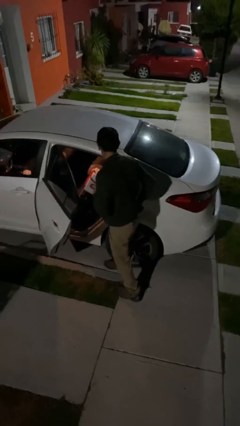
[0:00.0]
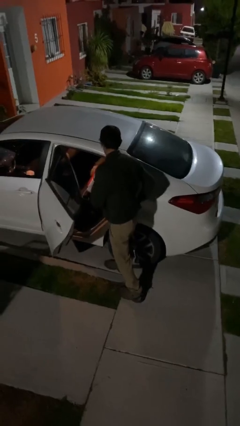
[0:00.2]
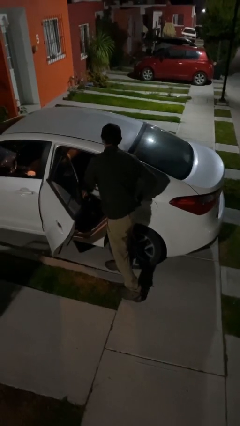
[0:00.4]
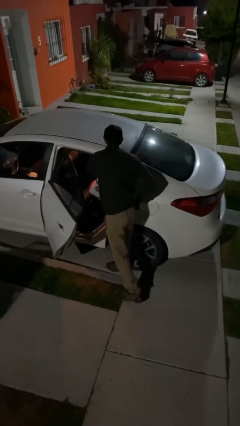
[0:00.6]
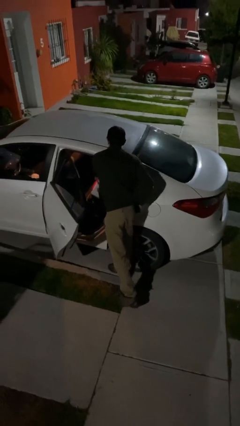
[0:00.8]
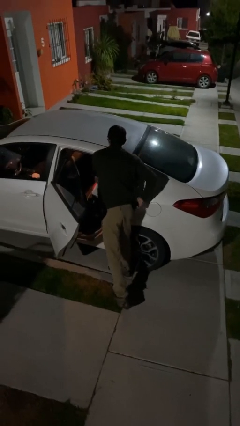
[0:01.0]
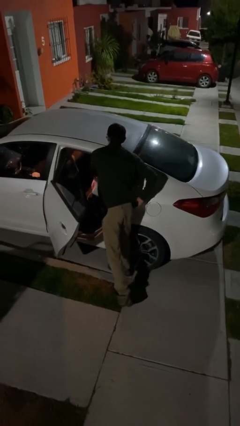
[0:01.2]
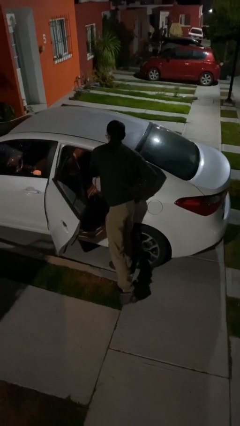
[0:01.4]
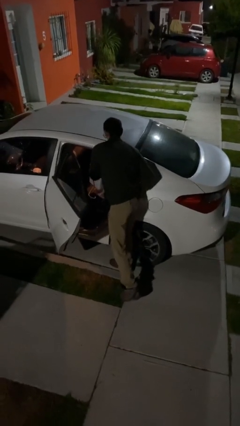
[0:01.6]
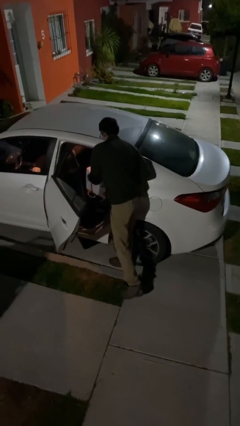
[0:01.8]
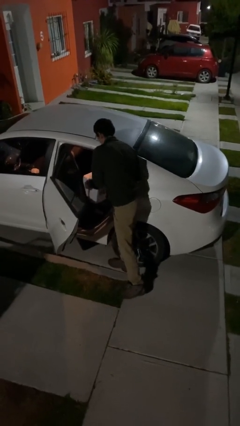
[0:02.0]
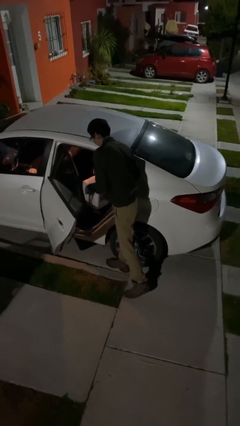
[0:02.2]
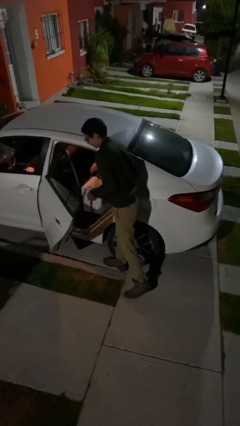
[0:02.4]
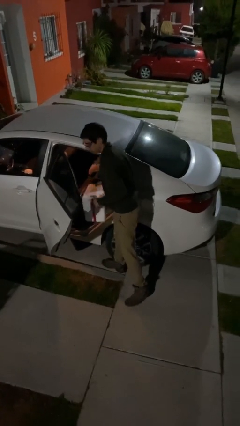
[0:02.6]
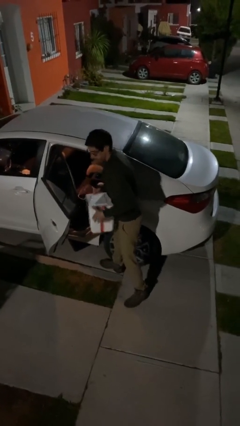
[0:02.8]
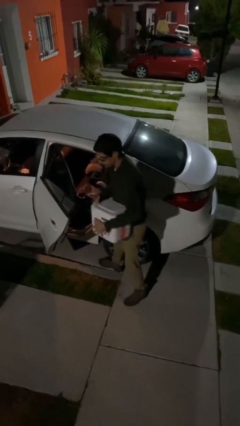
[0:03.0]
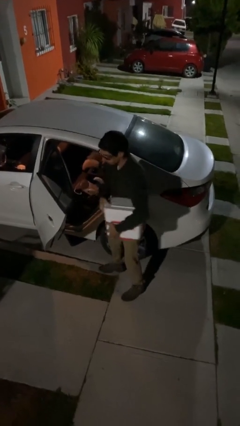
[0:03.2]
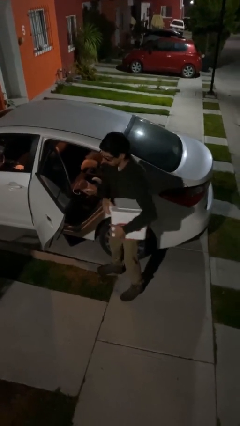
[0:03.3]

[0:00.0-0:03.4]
person unloads car

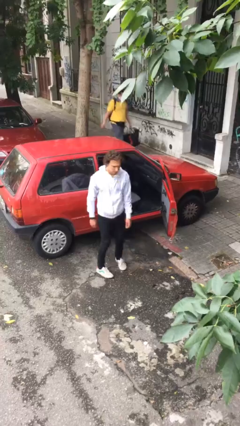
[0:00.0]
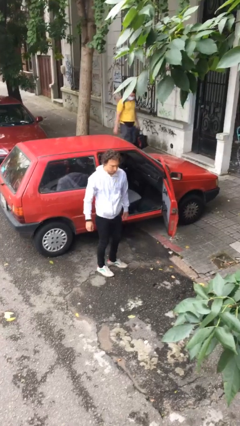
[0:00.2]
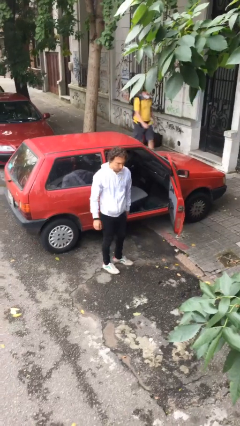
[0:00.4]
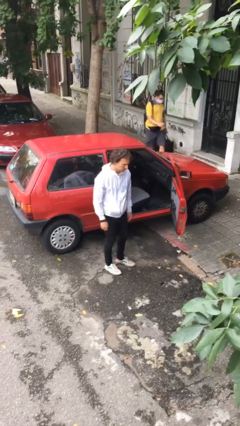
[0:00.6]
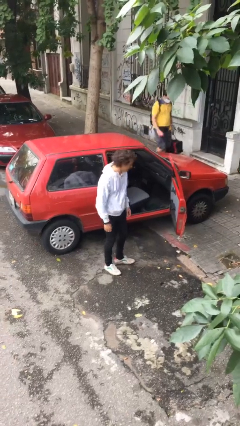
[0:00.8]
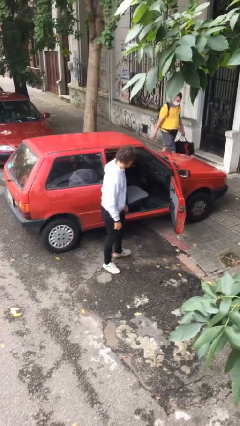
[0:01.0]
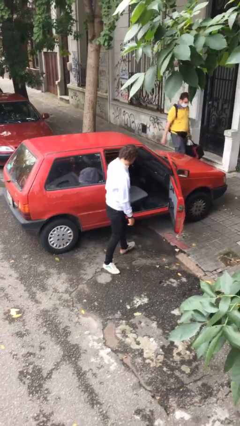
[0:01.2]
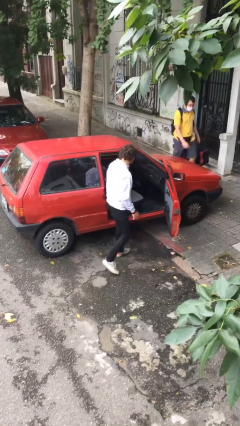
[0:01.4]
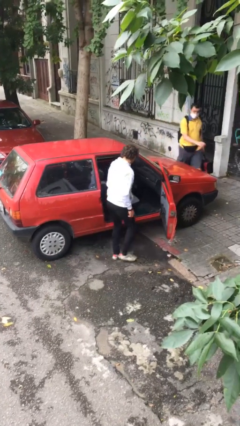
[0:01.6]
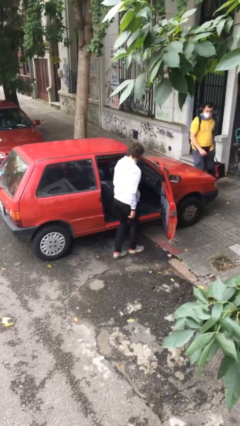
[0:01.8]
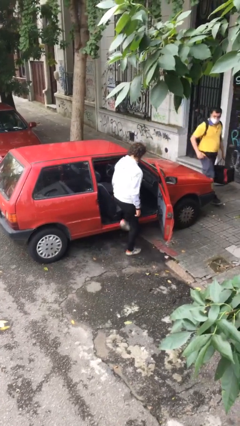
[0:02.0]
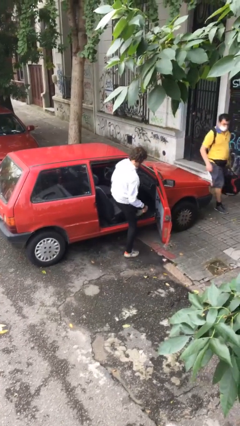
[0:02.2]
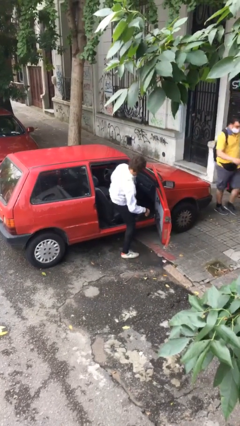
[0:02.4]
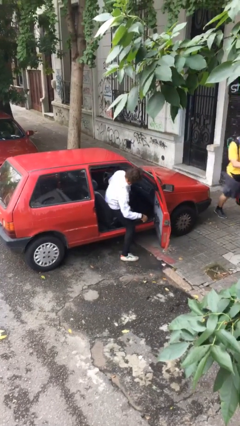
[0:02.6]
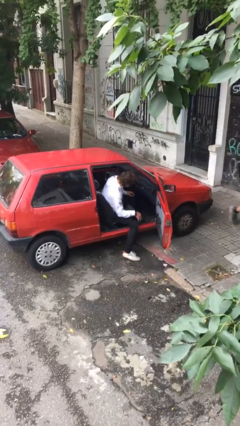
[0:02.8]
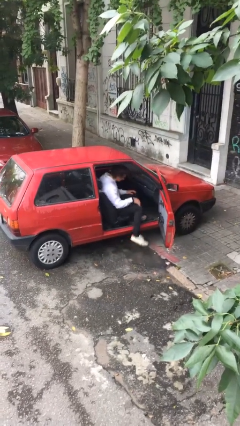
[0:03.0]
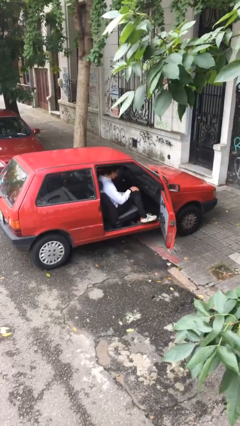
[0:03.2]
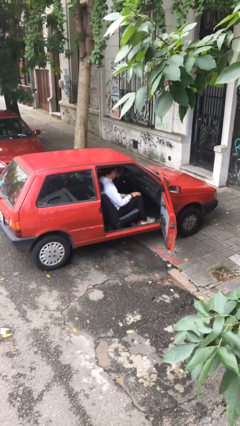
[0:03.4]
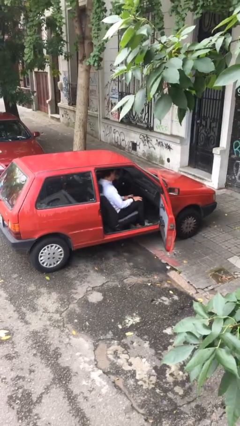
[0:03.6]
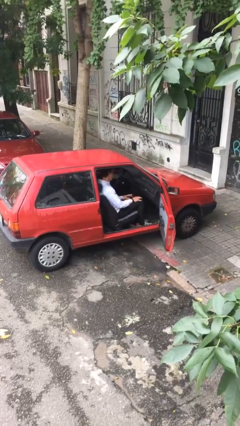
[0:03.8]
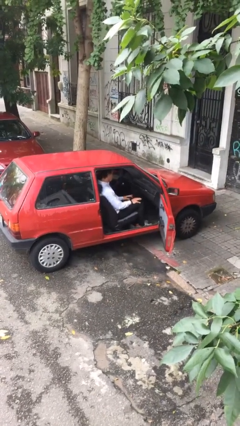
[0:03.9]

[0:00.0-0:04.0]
person enters car

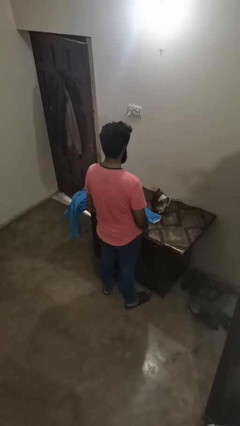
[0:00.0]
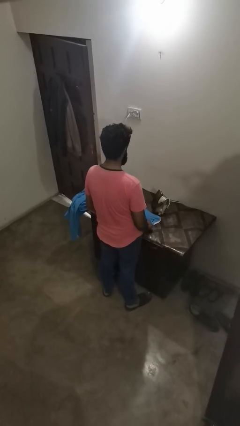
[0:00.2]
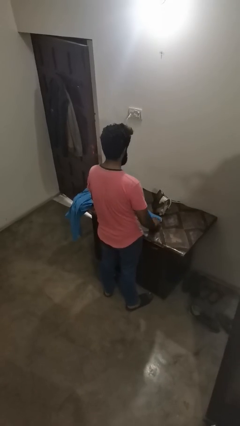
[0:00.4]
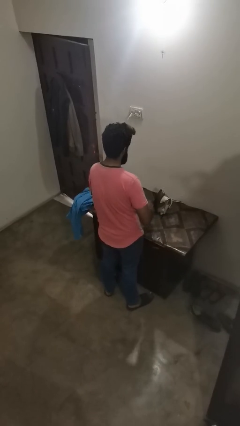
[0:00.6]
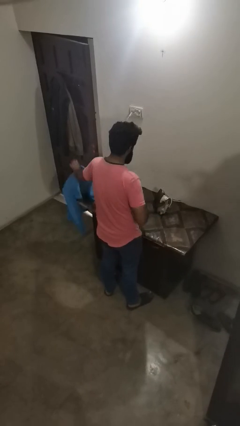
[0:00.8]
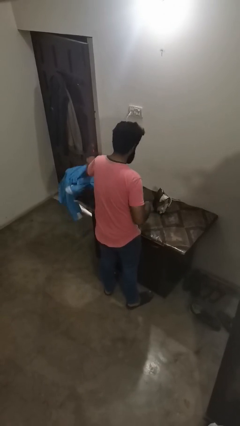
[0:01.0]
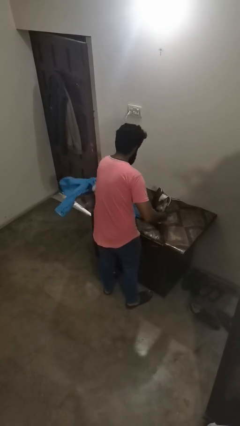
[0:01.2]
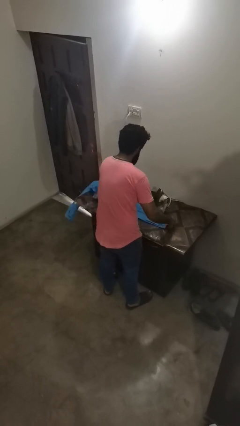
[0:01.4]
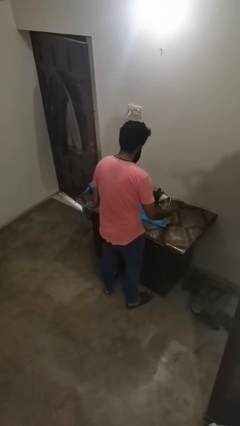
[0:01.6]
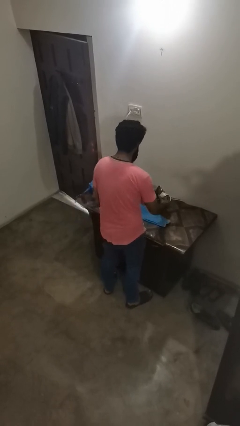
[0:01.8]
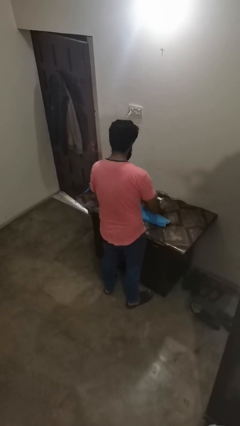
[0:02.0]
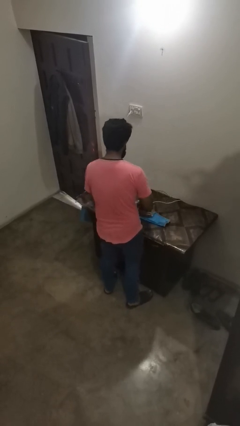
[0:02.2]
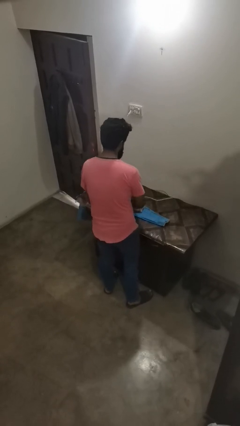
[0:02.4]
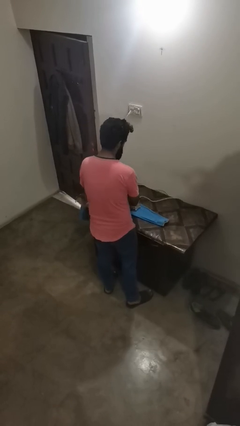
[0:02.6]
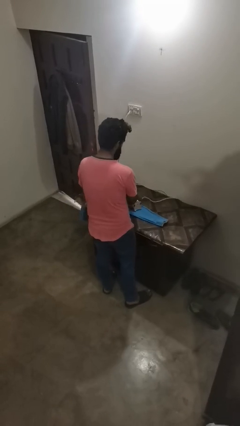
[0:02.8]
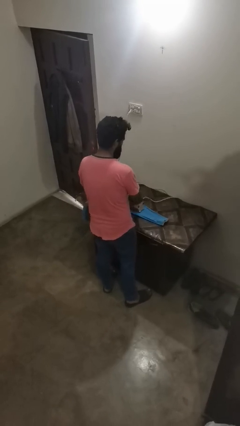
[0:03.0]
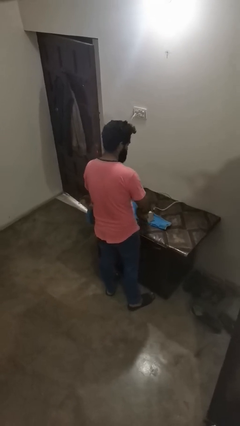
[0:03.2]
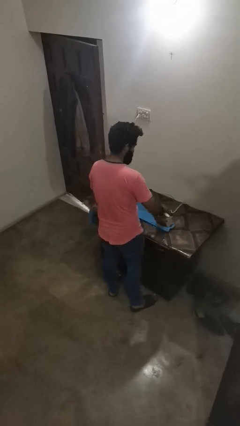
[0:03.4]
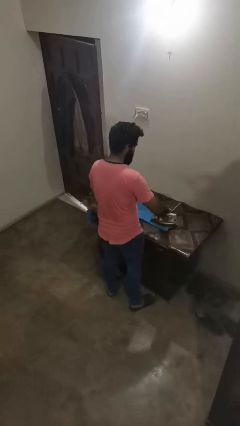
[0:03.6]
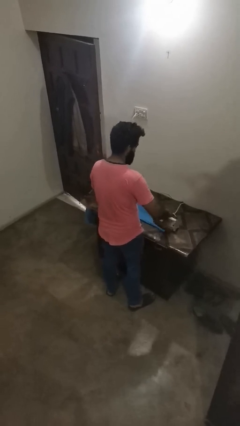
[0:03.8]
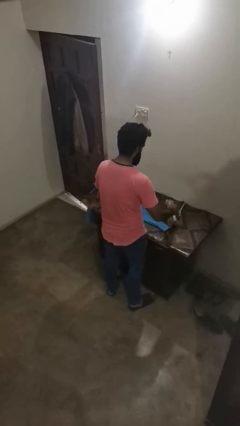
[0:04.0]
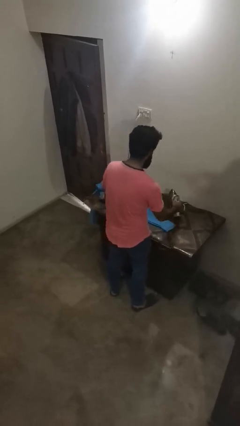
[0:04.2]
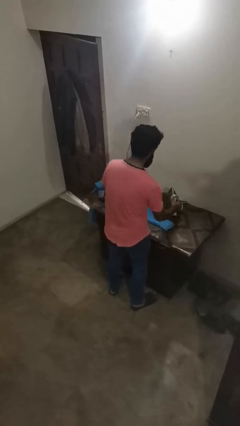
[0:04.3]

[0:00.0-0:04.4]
person irons clothes

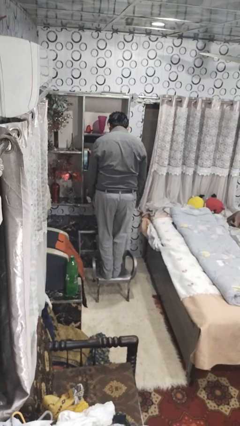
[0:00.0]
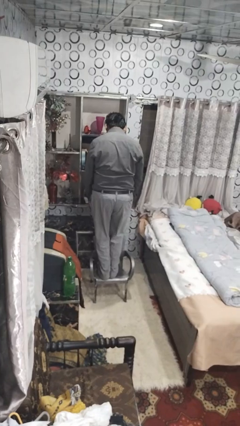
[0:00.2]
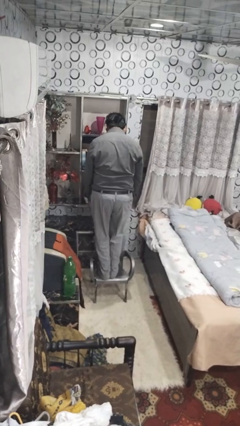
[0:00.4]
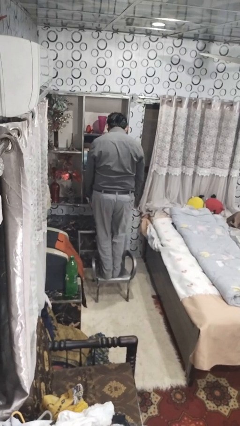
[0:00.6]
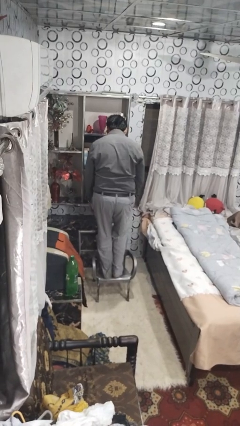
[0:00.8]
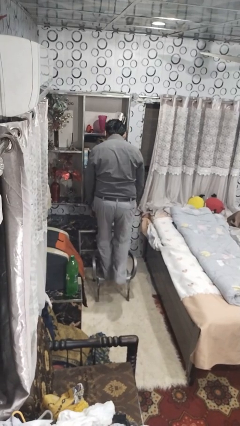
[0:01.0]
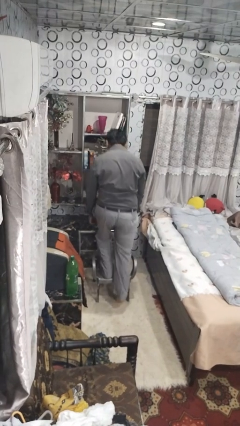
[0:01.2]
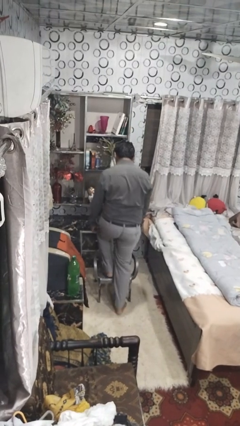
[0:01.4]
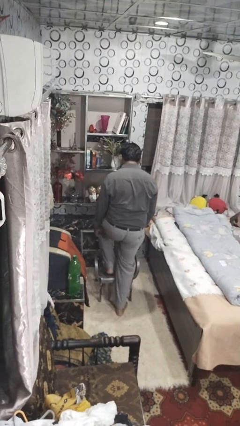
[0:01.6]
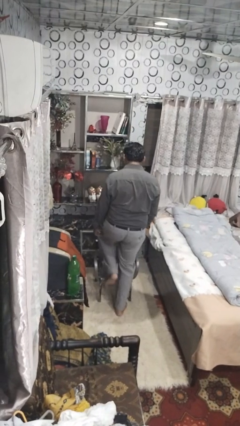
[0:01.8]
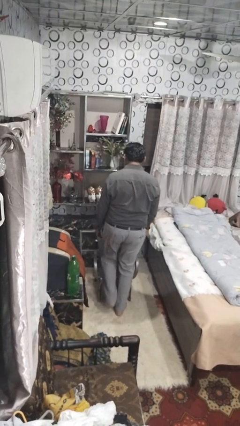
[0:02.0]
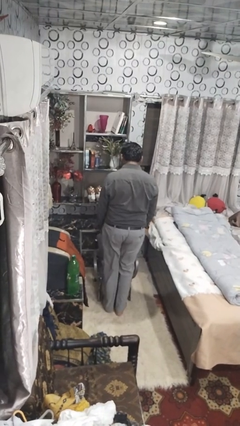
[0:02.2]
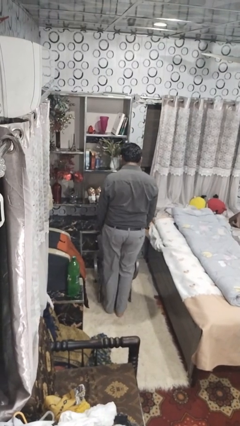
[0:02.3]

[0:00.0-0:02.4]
person climbs off chair

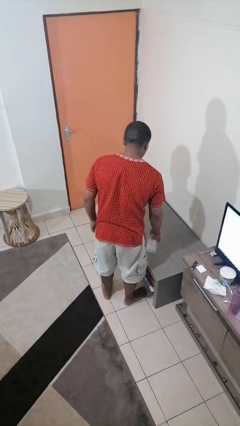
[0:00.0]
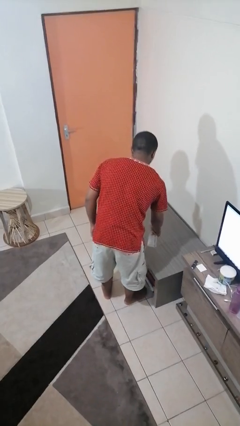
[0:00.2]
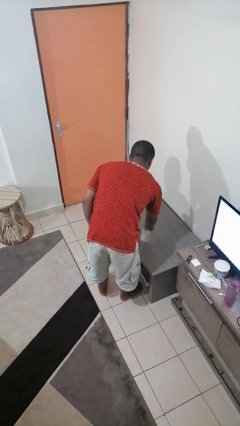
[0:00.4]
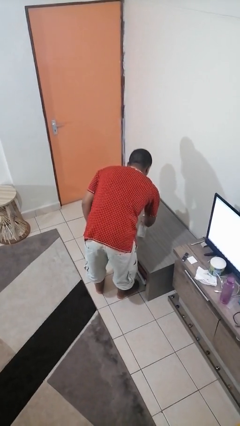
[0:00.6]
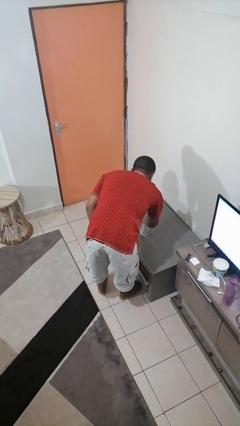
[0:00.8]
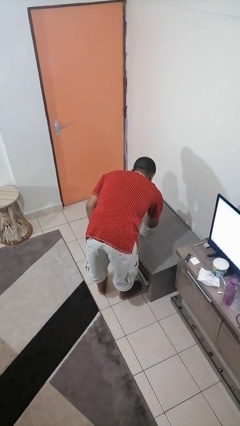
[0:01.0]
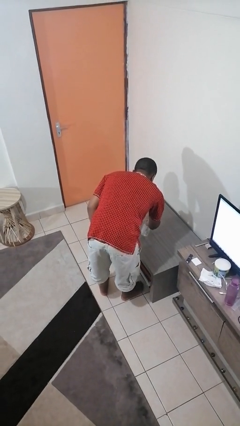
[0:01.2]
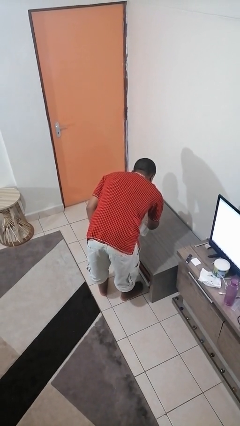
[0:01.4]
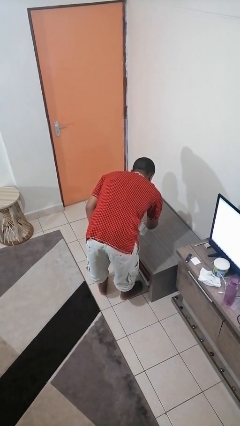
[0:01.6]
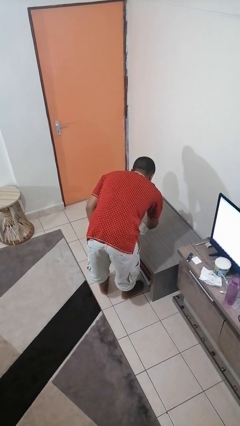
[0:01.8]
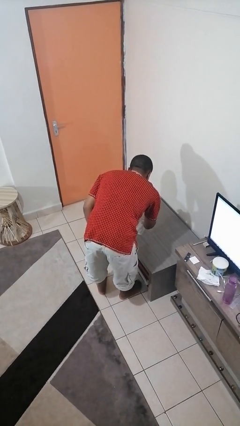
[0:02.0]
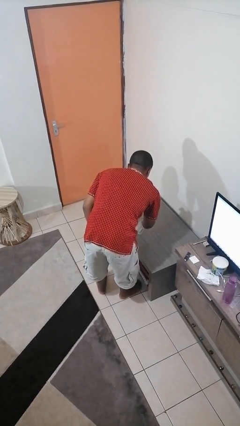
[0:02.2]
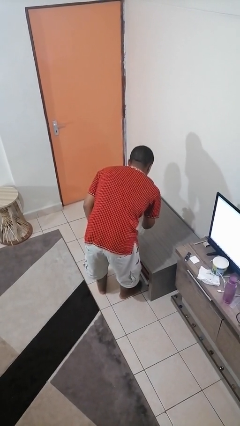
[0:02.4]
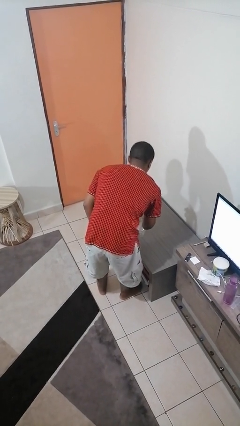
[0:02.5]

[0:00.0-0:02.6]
person sprays from bottle

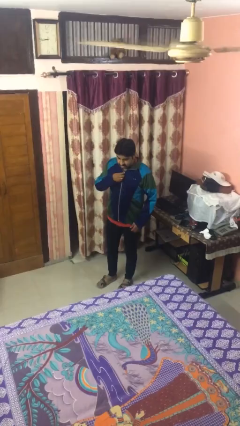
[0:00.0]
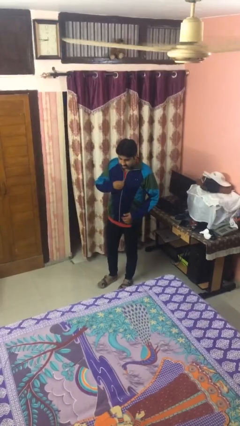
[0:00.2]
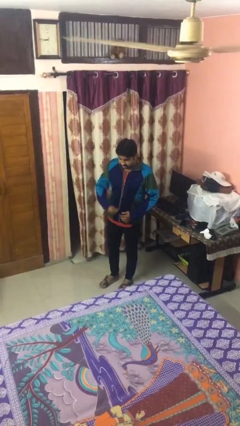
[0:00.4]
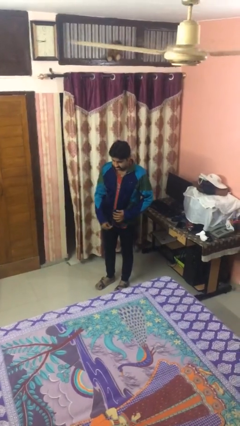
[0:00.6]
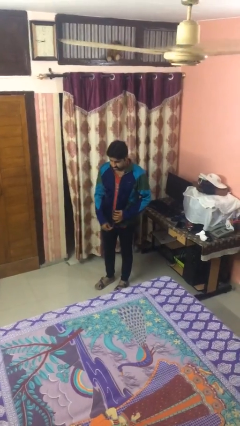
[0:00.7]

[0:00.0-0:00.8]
person unzips jacket
